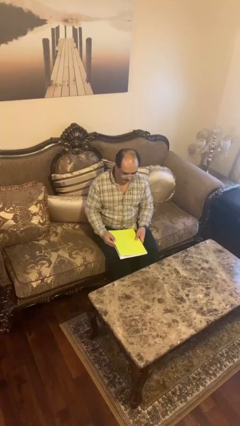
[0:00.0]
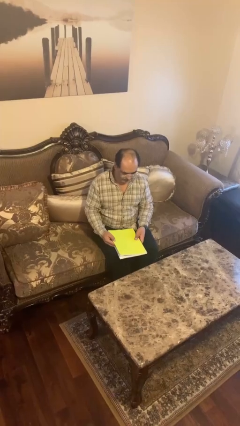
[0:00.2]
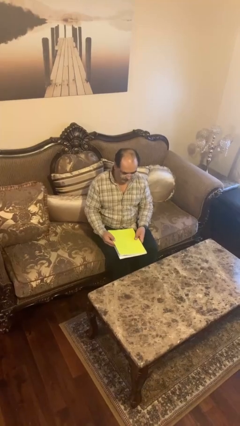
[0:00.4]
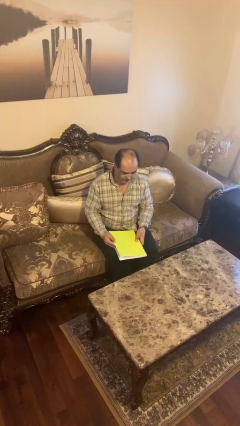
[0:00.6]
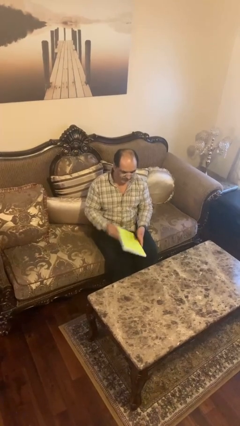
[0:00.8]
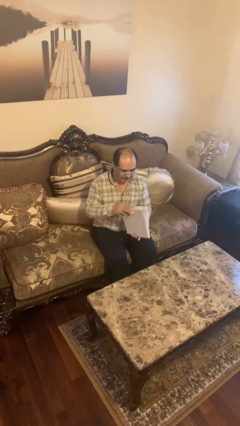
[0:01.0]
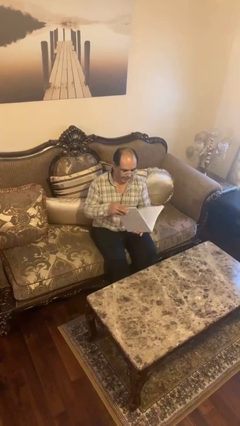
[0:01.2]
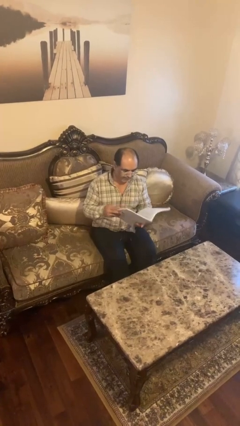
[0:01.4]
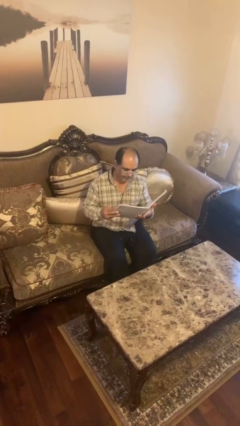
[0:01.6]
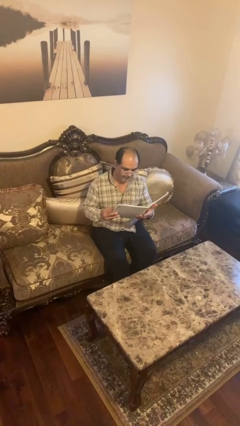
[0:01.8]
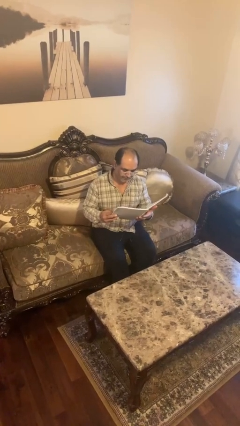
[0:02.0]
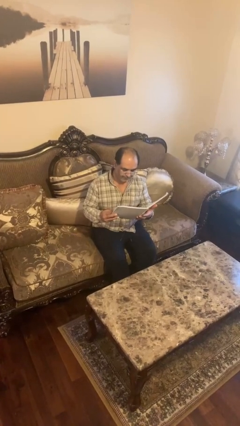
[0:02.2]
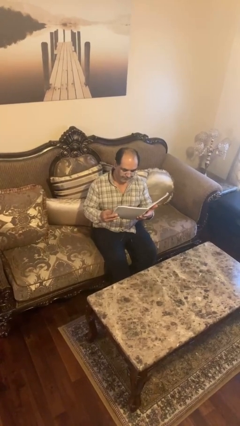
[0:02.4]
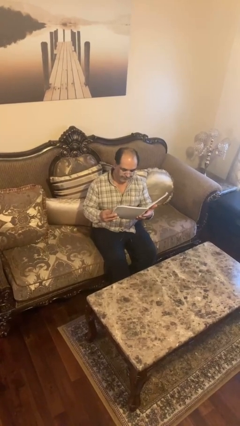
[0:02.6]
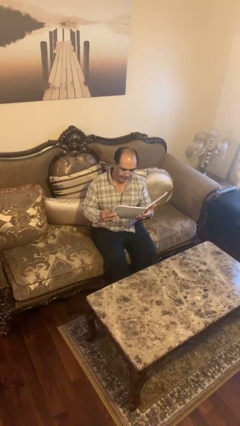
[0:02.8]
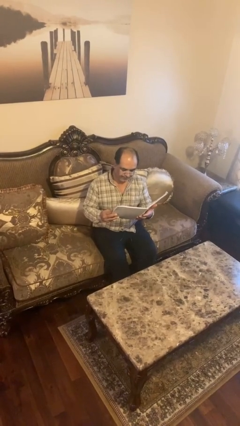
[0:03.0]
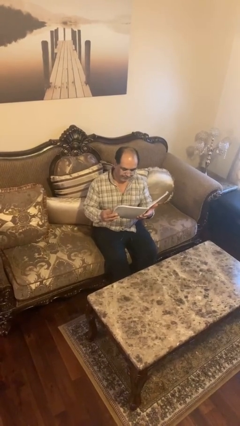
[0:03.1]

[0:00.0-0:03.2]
person reads document

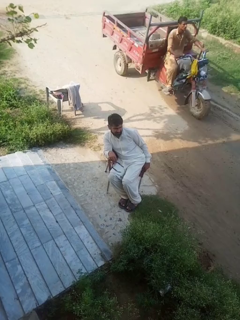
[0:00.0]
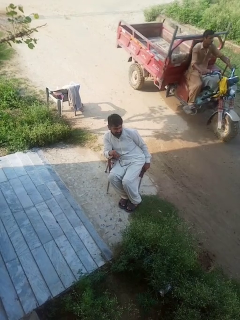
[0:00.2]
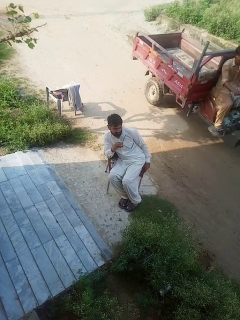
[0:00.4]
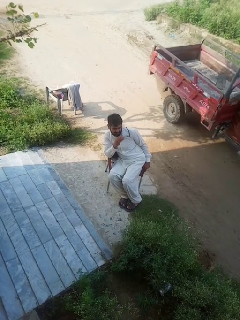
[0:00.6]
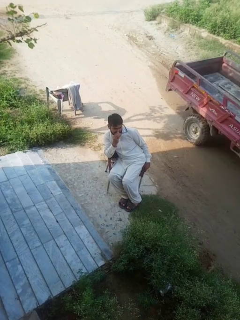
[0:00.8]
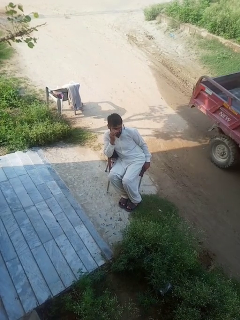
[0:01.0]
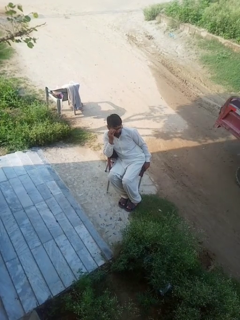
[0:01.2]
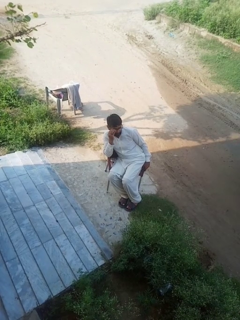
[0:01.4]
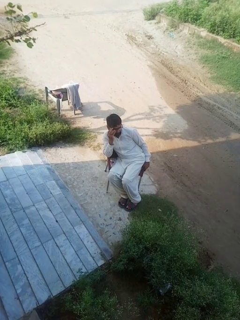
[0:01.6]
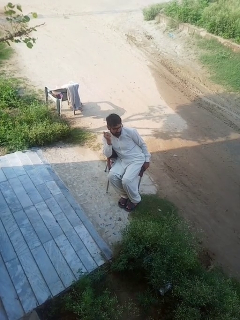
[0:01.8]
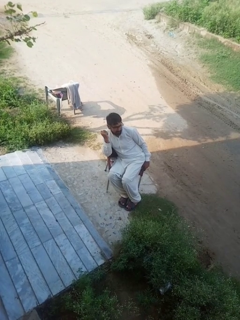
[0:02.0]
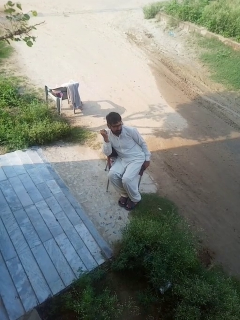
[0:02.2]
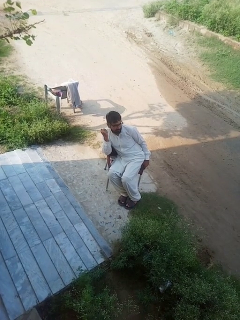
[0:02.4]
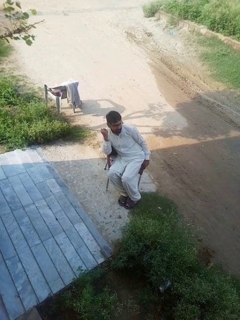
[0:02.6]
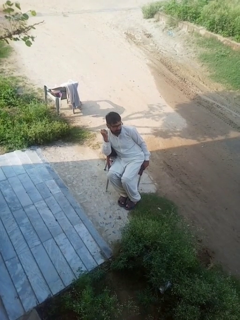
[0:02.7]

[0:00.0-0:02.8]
person puts on glasses

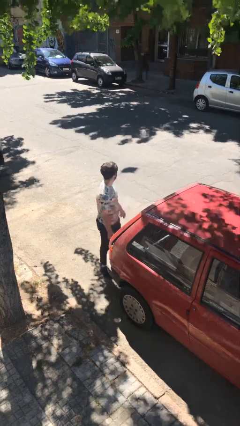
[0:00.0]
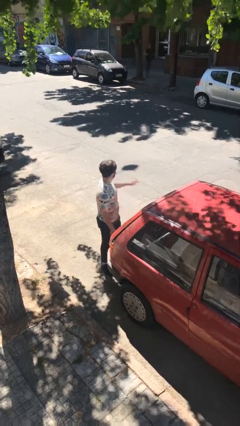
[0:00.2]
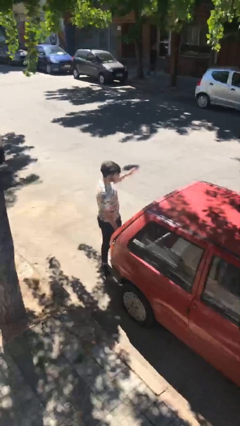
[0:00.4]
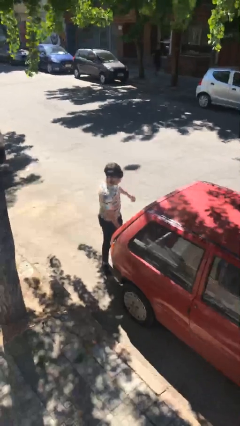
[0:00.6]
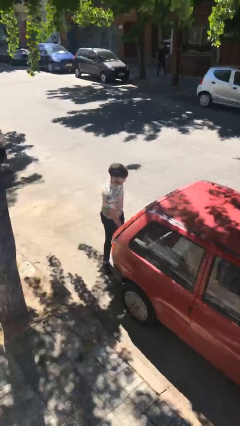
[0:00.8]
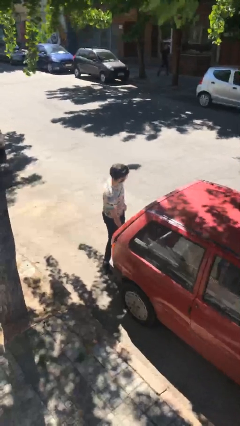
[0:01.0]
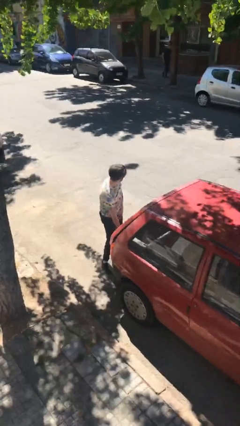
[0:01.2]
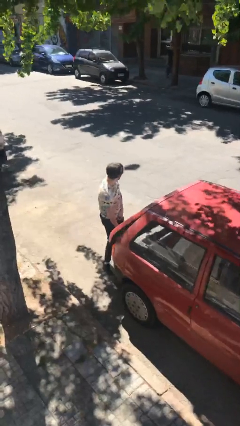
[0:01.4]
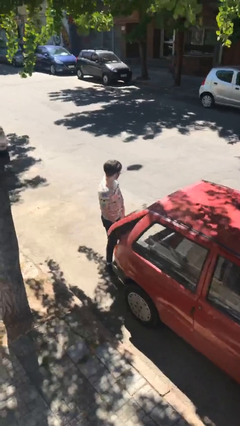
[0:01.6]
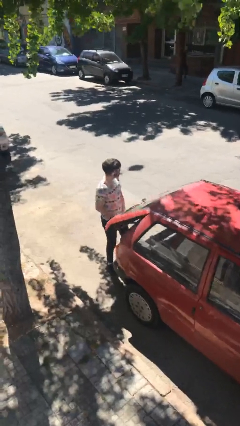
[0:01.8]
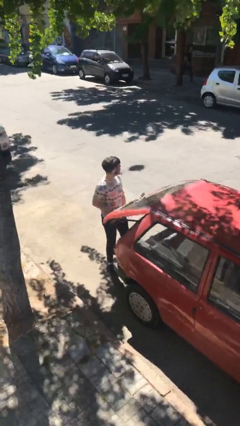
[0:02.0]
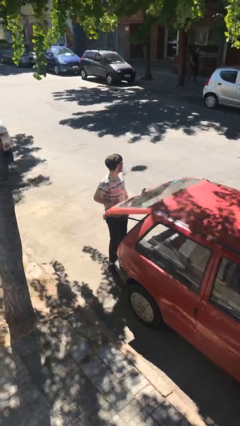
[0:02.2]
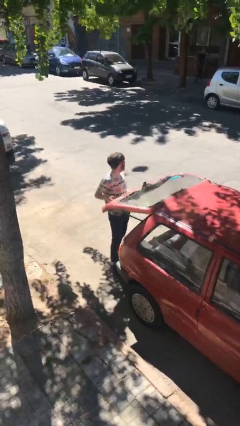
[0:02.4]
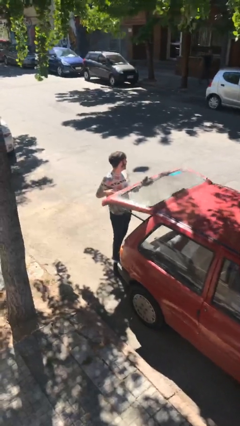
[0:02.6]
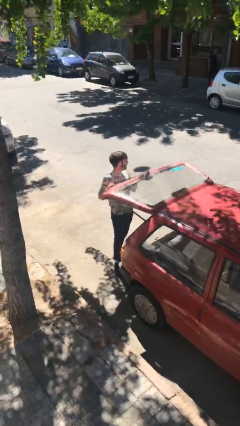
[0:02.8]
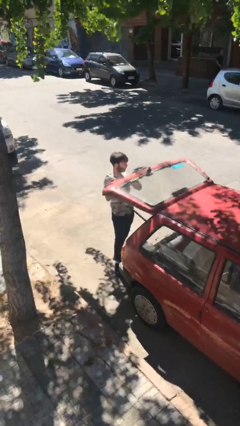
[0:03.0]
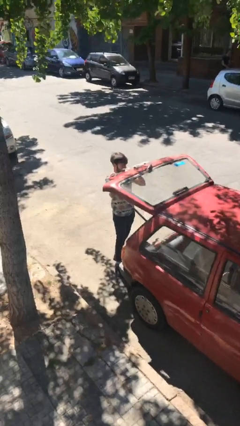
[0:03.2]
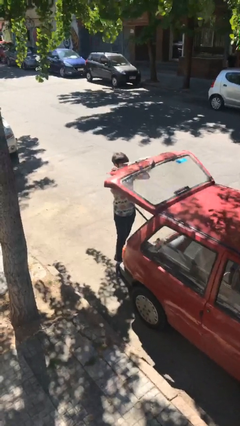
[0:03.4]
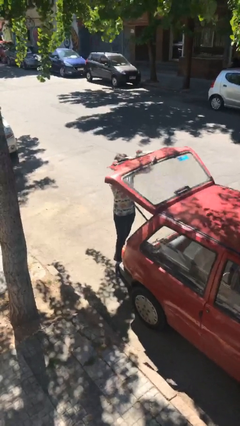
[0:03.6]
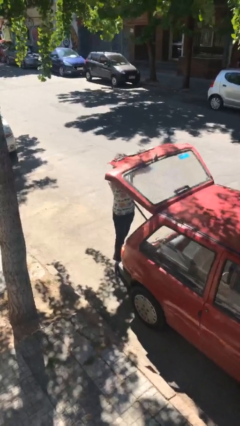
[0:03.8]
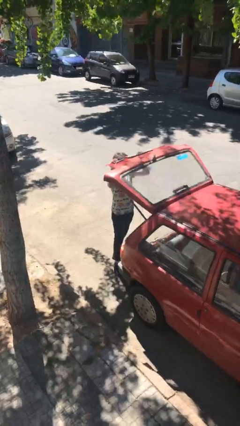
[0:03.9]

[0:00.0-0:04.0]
person opens car trunk

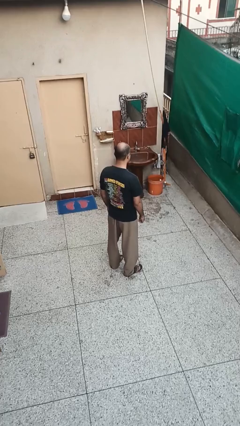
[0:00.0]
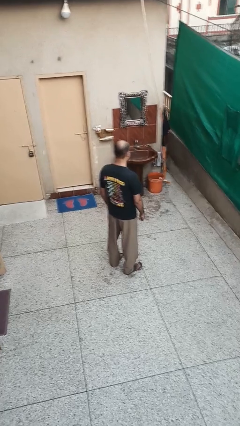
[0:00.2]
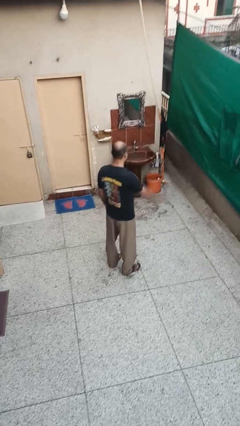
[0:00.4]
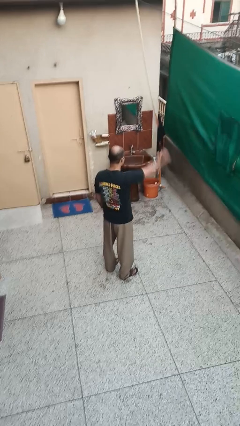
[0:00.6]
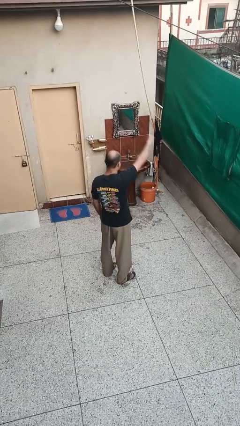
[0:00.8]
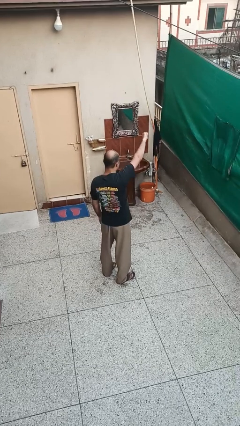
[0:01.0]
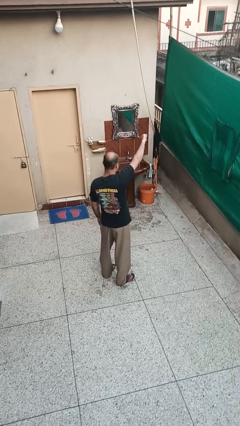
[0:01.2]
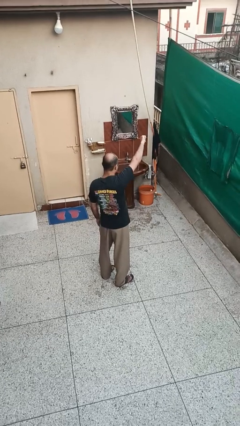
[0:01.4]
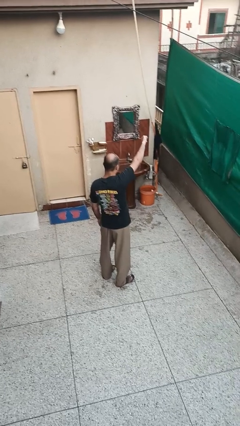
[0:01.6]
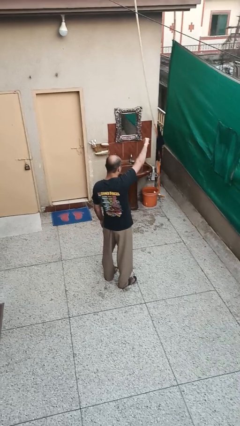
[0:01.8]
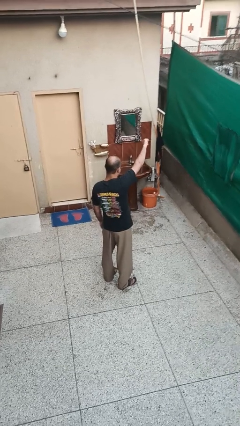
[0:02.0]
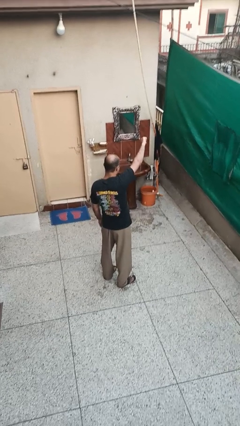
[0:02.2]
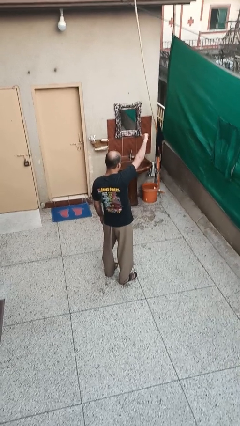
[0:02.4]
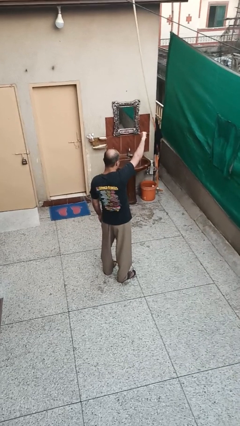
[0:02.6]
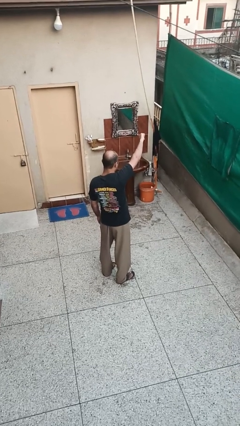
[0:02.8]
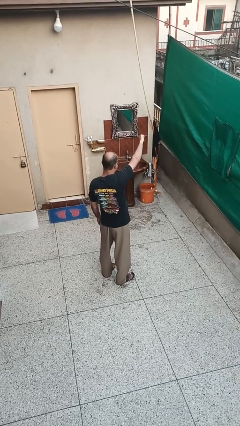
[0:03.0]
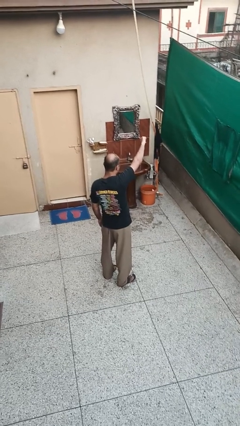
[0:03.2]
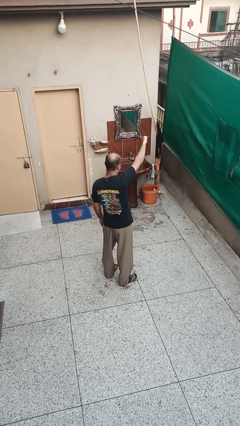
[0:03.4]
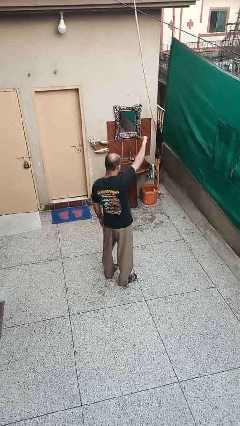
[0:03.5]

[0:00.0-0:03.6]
person gestures thumbs down

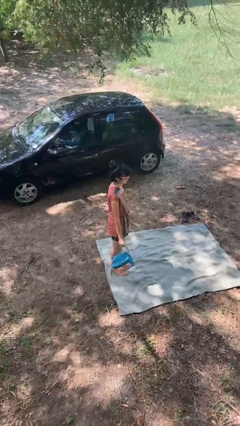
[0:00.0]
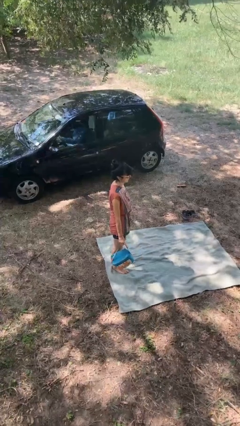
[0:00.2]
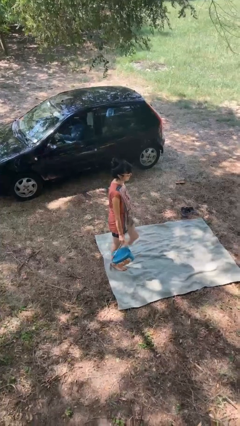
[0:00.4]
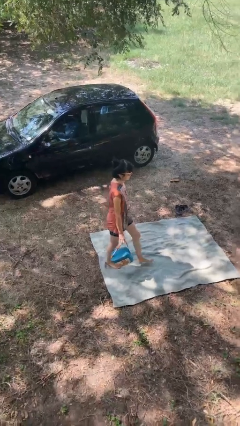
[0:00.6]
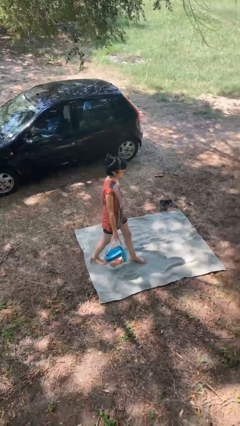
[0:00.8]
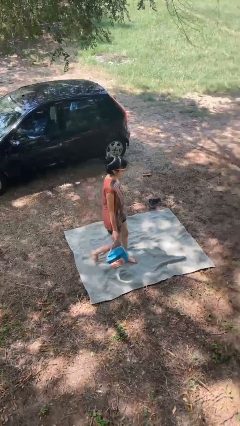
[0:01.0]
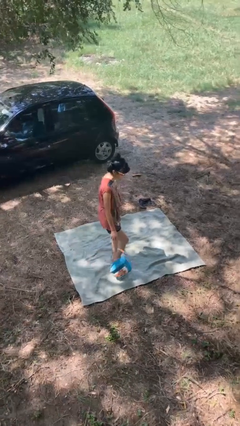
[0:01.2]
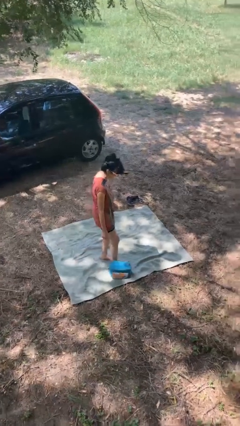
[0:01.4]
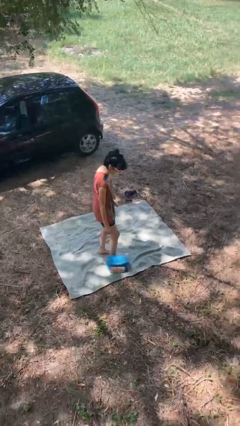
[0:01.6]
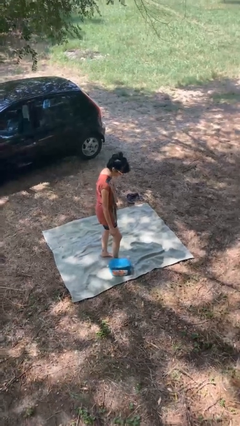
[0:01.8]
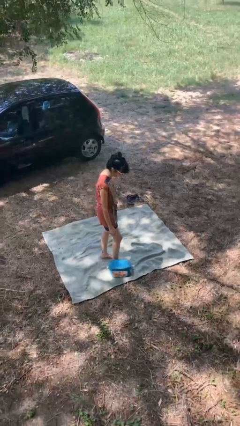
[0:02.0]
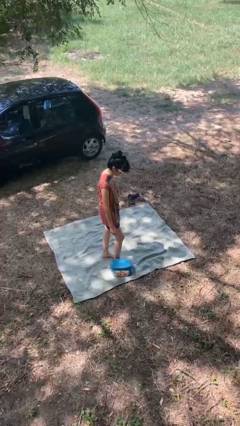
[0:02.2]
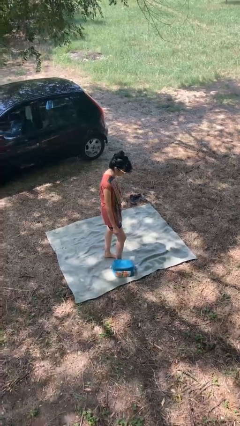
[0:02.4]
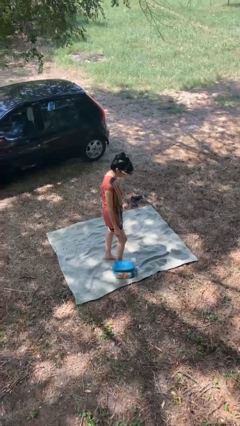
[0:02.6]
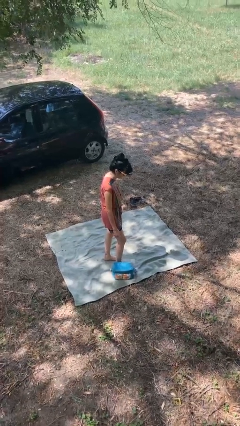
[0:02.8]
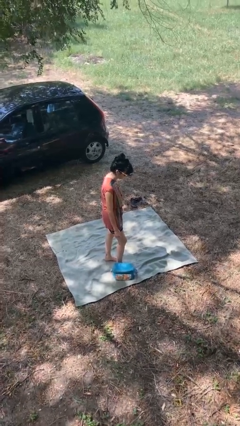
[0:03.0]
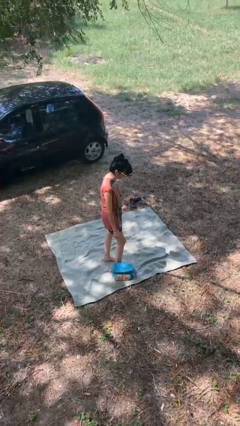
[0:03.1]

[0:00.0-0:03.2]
person drops object

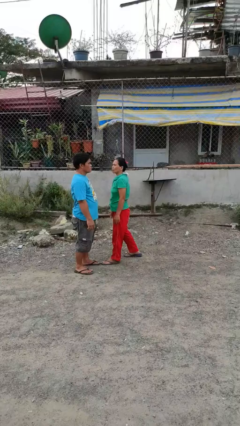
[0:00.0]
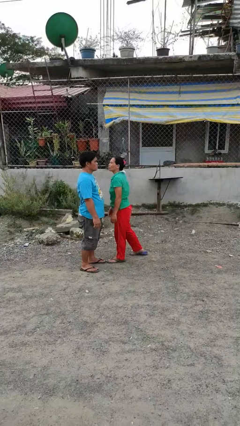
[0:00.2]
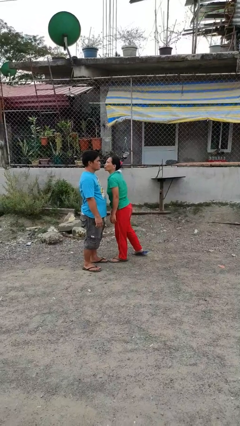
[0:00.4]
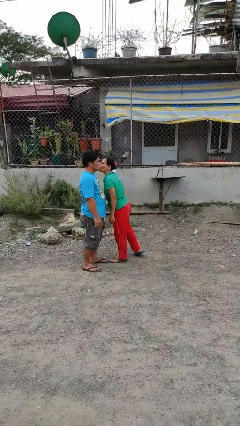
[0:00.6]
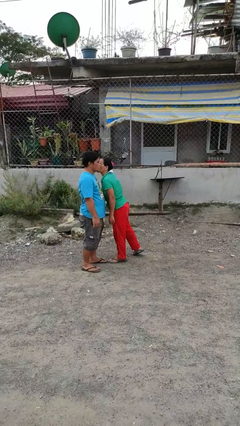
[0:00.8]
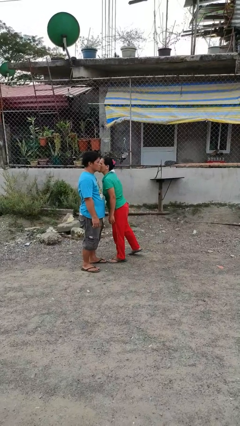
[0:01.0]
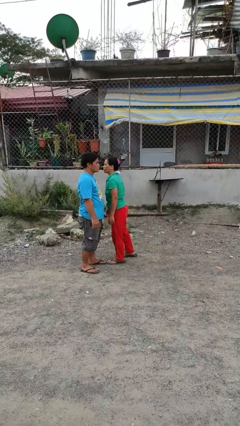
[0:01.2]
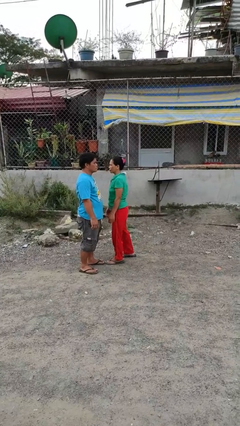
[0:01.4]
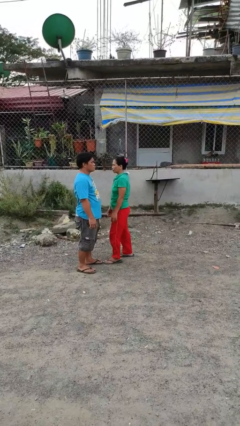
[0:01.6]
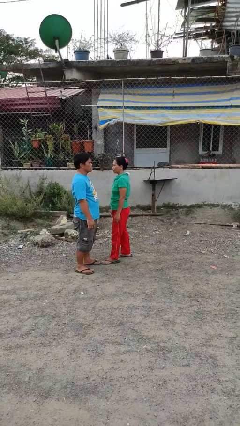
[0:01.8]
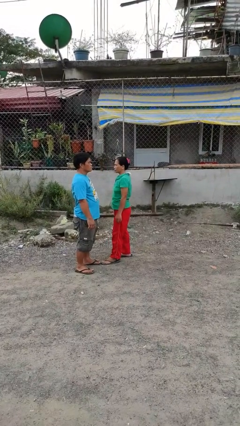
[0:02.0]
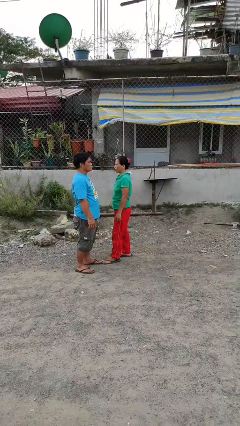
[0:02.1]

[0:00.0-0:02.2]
person kisses cheek of person
